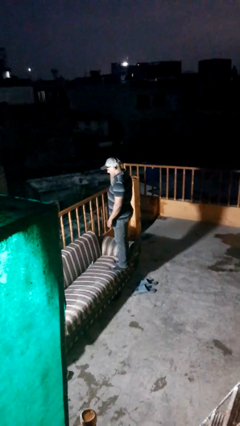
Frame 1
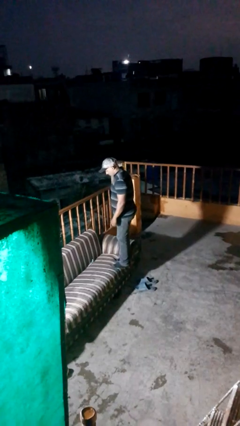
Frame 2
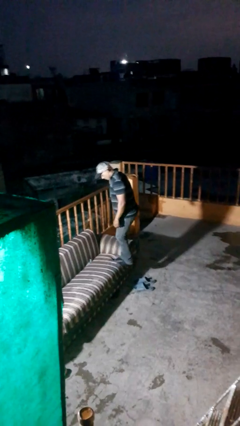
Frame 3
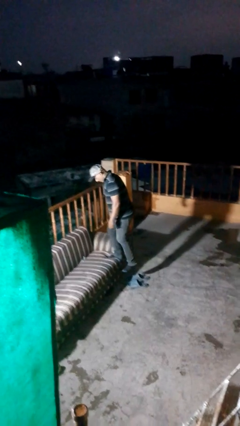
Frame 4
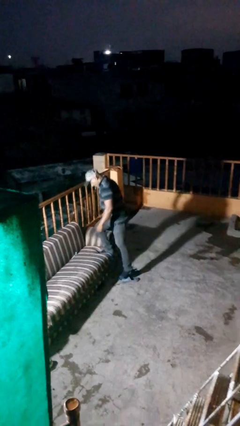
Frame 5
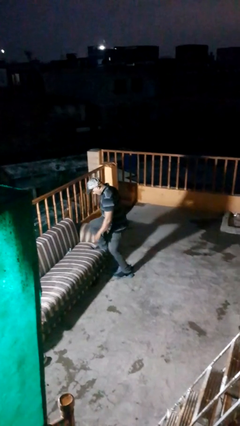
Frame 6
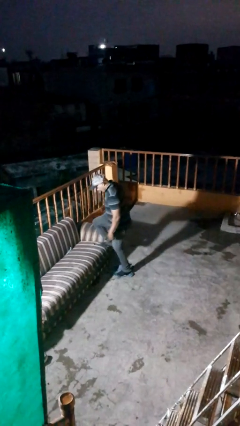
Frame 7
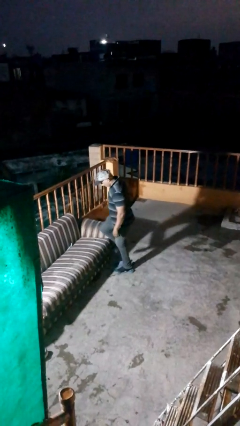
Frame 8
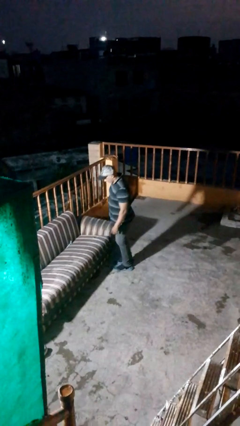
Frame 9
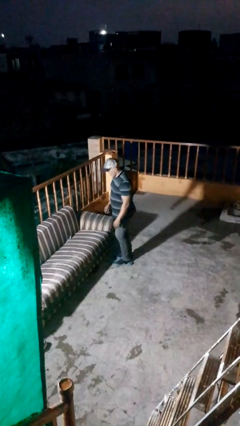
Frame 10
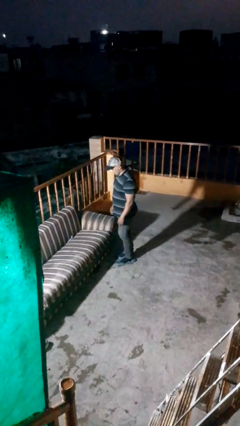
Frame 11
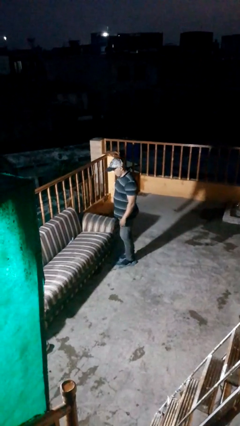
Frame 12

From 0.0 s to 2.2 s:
person climbs off couch

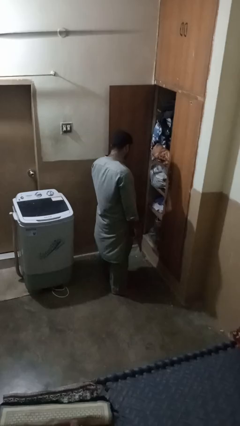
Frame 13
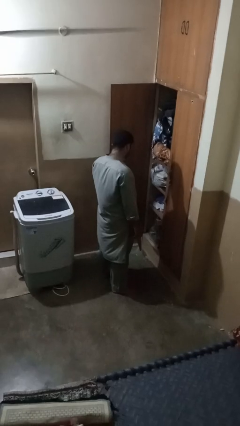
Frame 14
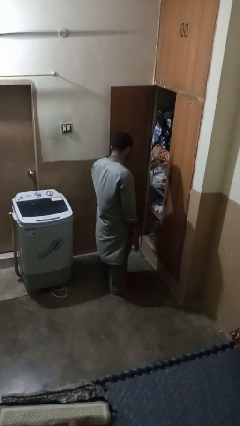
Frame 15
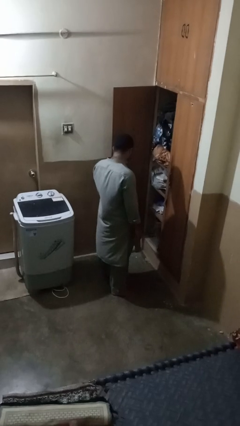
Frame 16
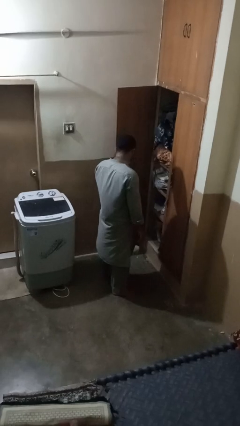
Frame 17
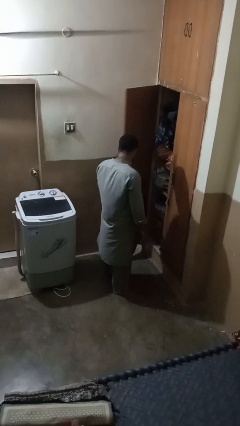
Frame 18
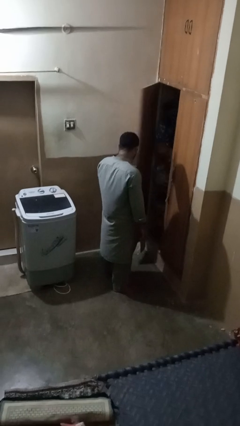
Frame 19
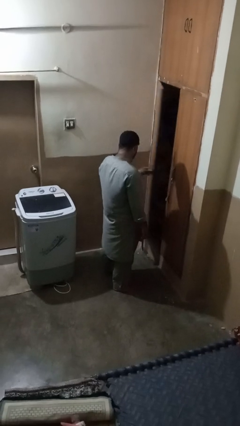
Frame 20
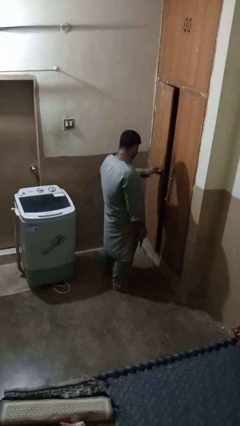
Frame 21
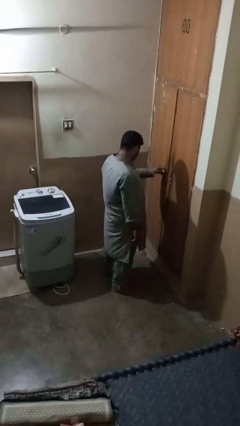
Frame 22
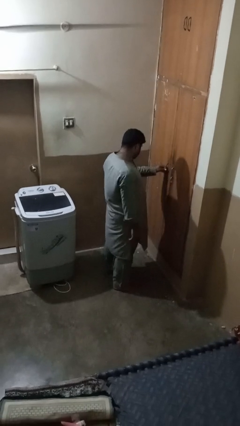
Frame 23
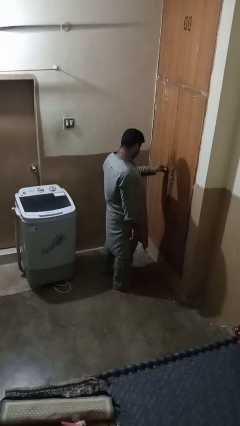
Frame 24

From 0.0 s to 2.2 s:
person closes closet door

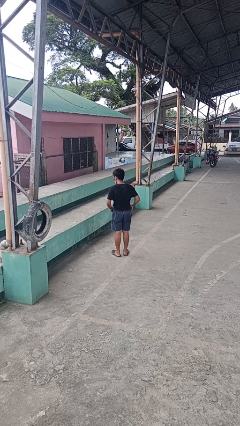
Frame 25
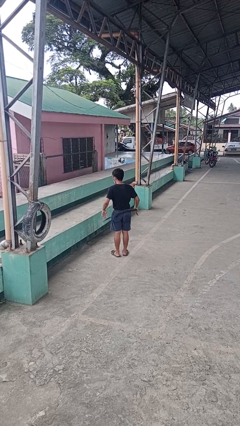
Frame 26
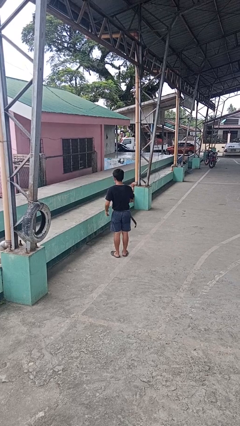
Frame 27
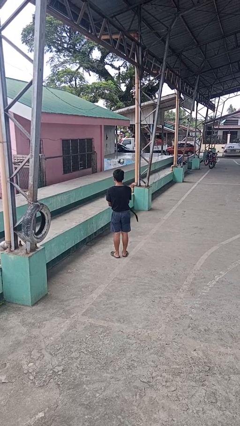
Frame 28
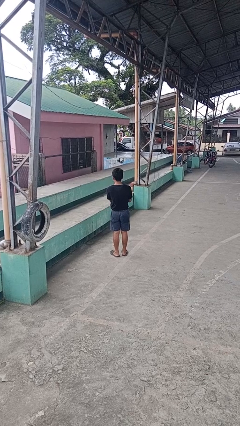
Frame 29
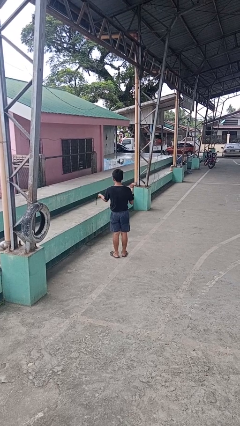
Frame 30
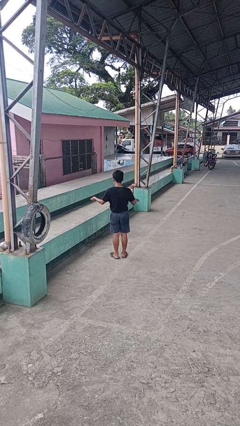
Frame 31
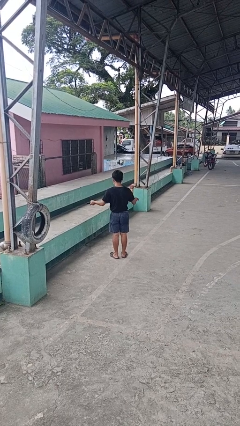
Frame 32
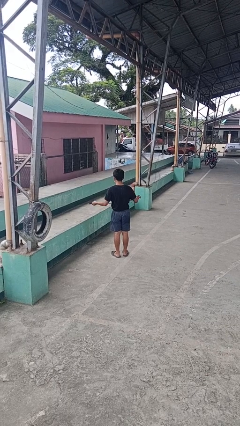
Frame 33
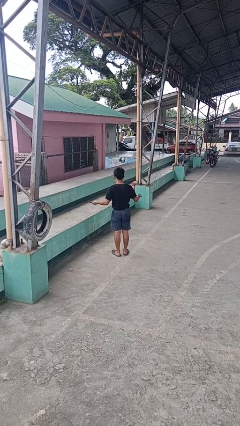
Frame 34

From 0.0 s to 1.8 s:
person takes off belt

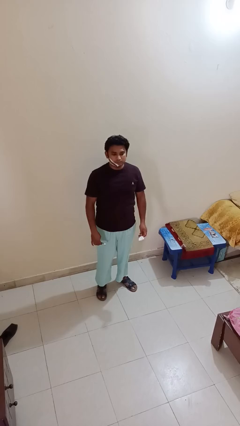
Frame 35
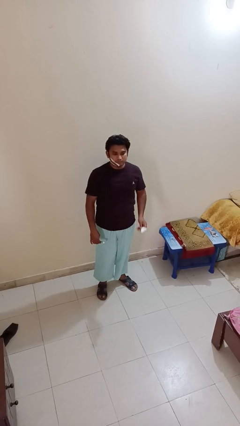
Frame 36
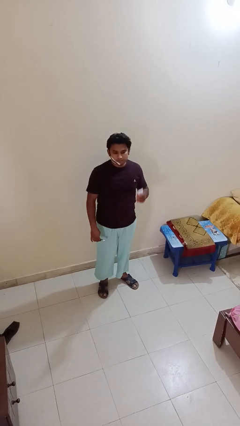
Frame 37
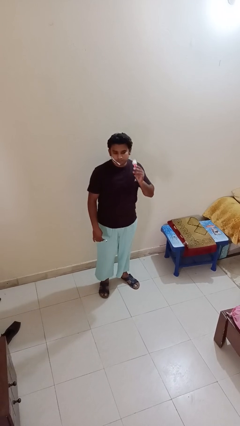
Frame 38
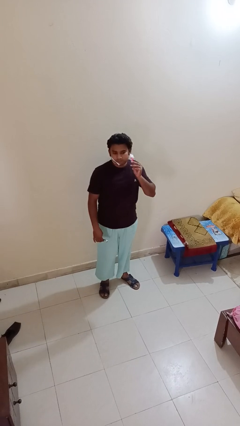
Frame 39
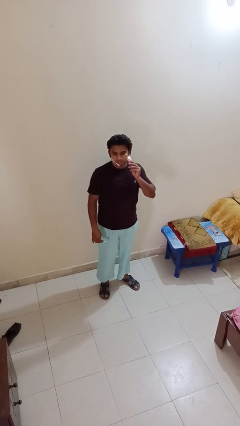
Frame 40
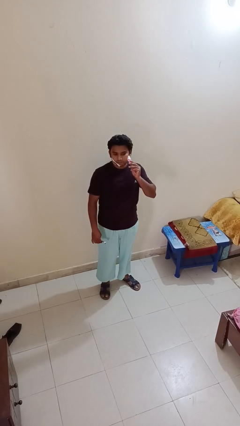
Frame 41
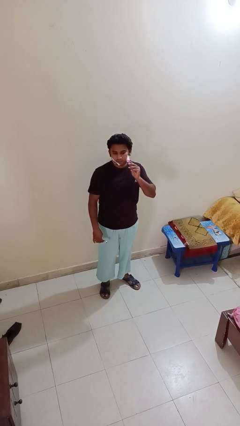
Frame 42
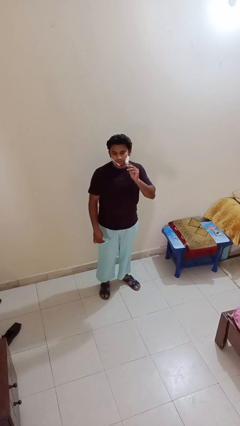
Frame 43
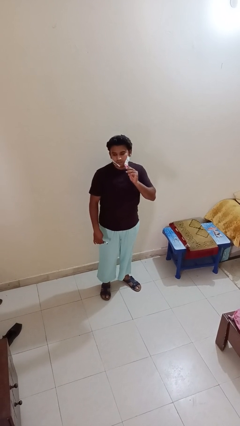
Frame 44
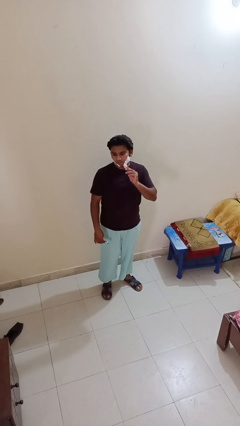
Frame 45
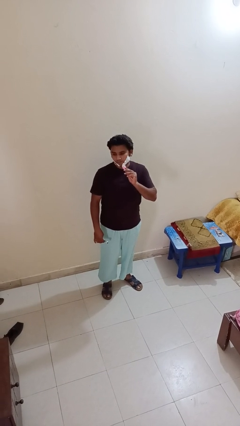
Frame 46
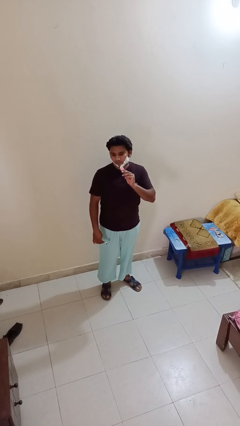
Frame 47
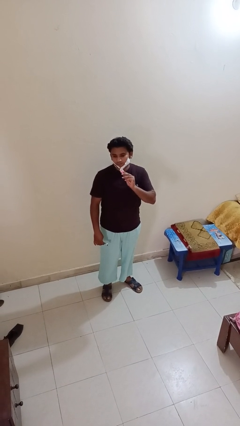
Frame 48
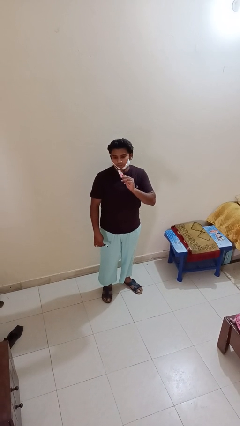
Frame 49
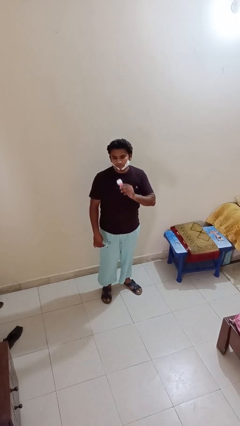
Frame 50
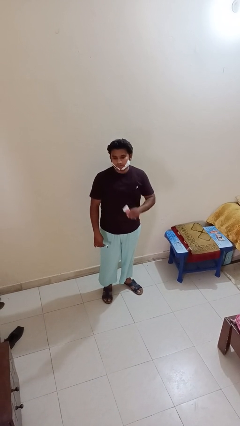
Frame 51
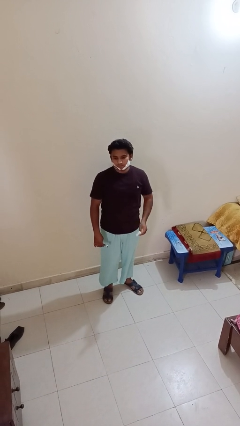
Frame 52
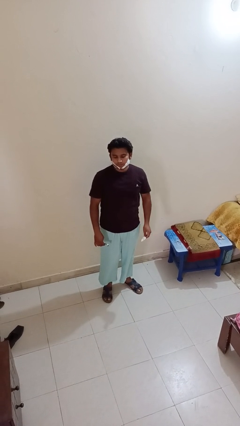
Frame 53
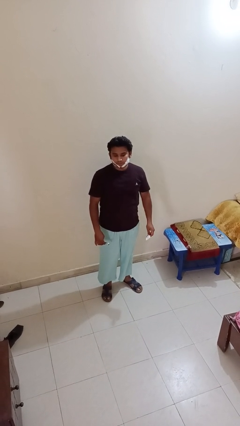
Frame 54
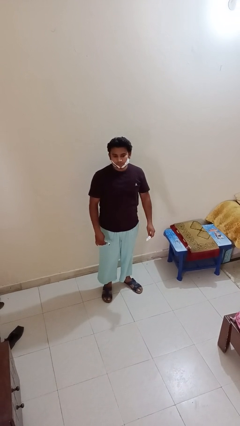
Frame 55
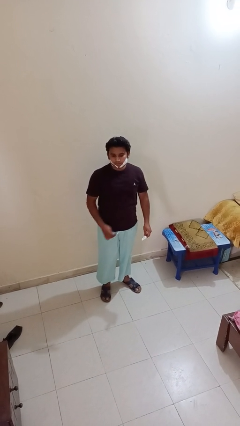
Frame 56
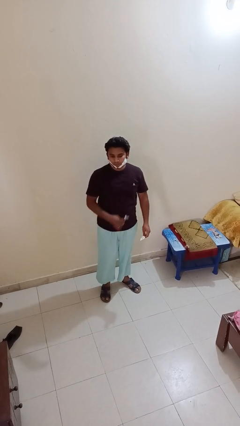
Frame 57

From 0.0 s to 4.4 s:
person applies shaving cream

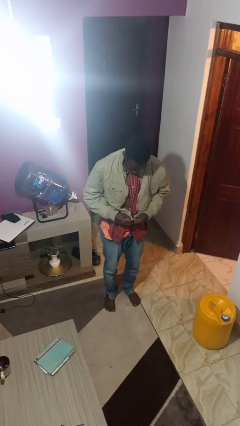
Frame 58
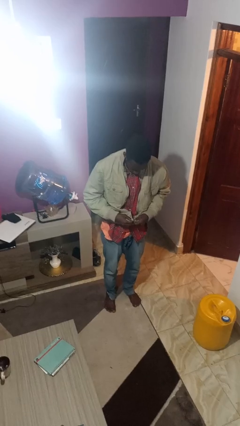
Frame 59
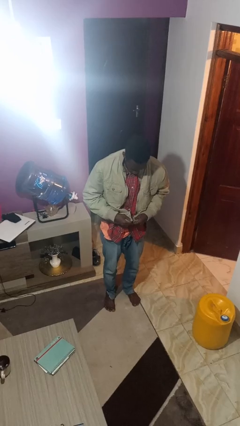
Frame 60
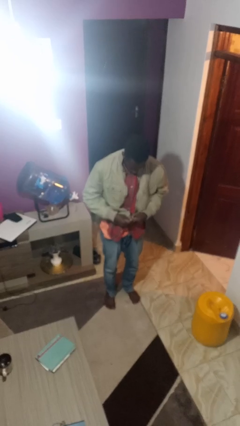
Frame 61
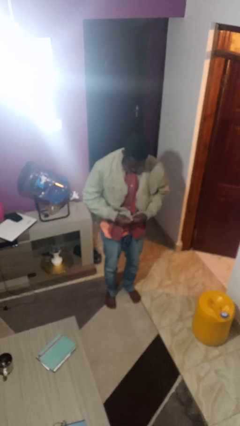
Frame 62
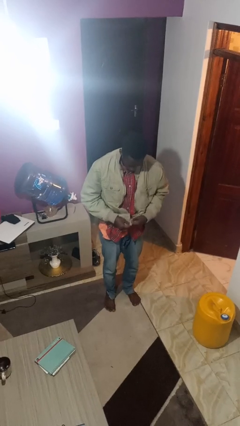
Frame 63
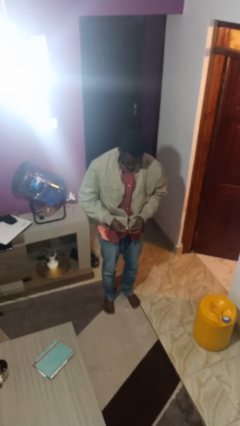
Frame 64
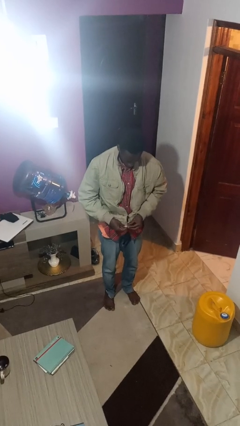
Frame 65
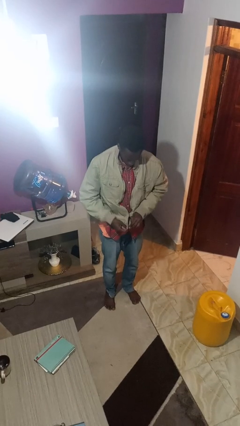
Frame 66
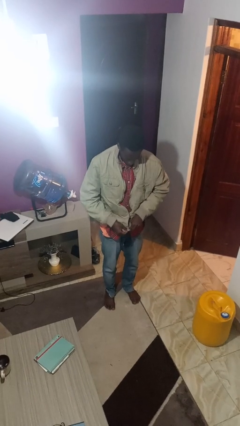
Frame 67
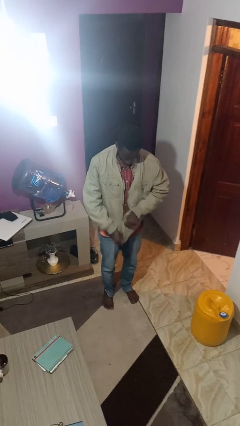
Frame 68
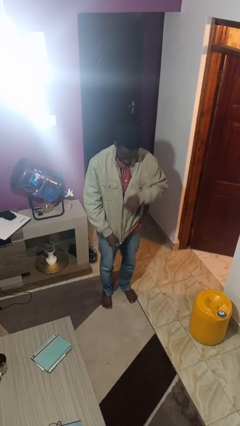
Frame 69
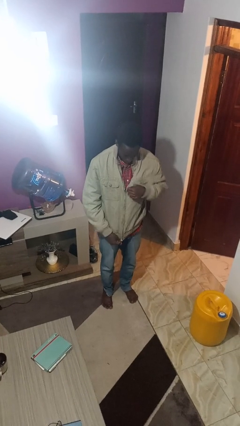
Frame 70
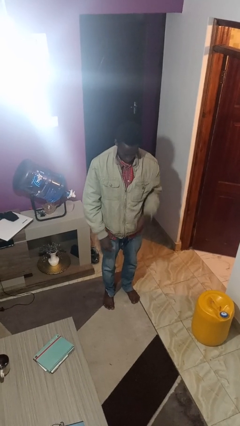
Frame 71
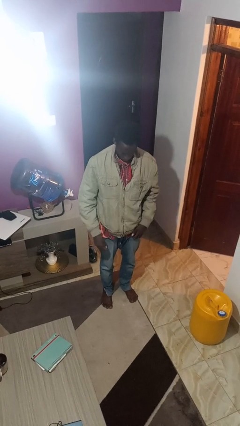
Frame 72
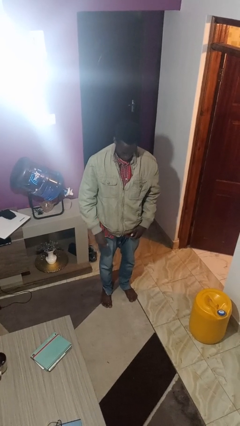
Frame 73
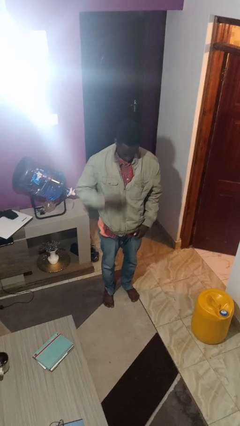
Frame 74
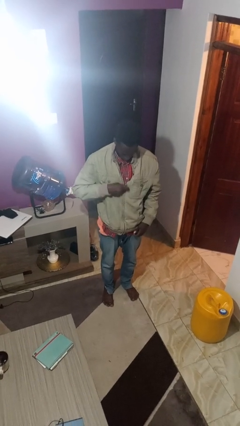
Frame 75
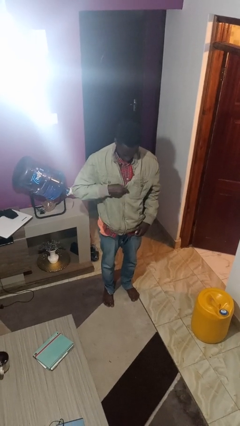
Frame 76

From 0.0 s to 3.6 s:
person zips up jacket

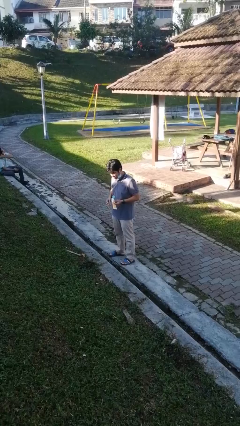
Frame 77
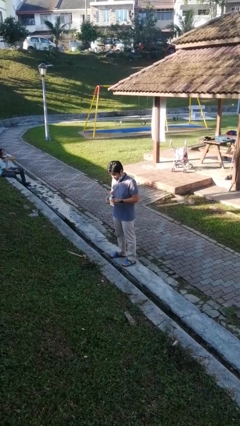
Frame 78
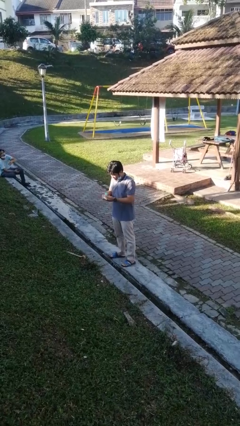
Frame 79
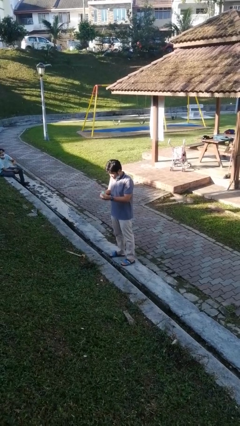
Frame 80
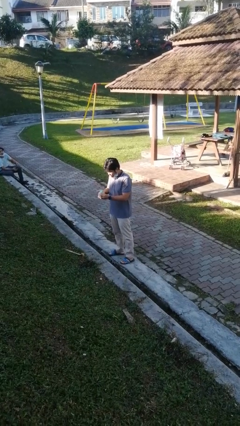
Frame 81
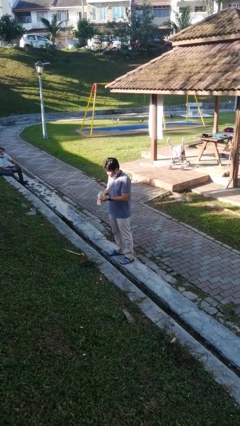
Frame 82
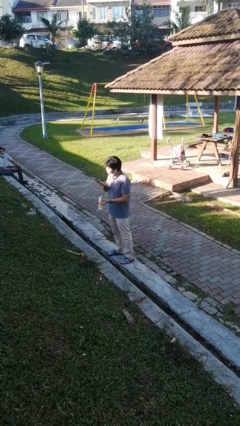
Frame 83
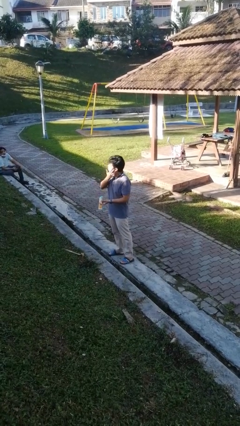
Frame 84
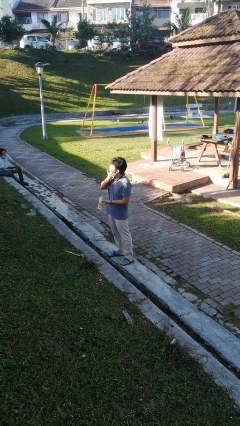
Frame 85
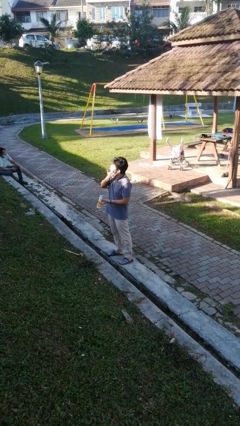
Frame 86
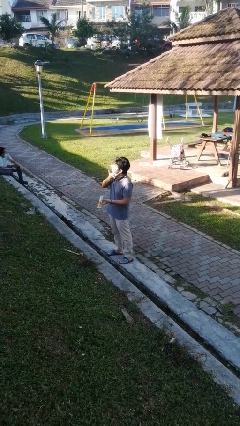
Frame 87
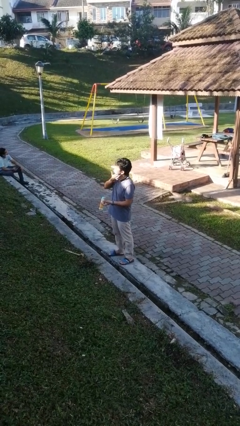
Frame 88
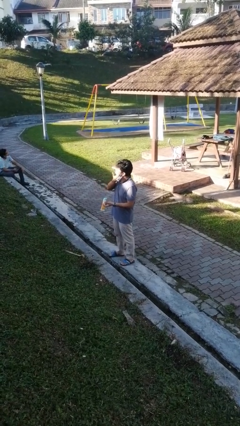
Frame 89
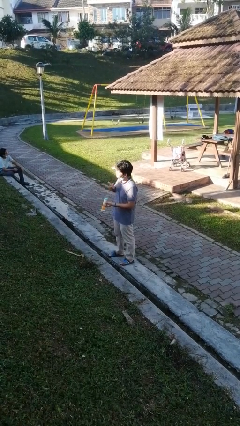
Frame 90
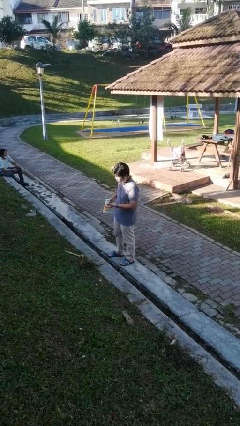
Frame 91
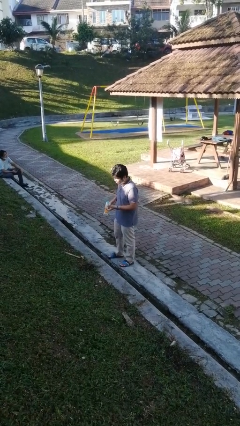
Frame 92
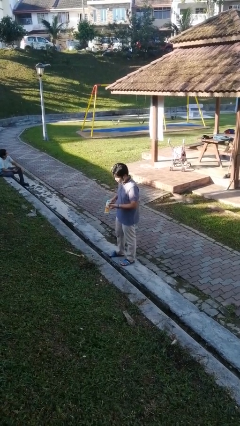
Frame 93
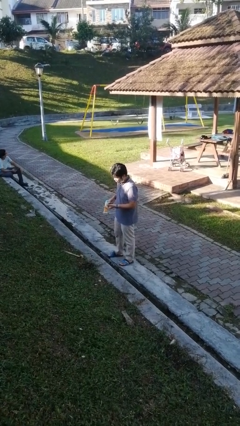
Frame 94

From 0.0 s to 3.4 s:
person applies facial moisturizer
